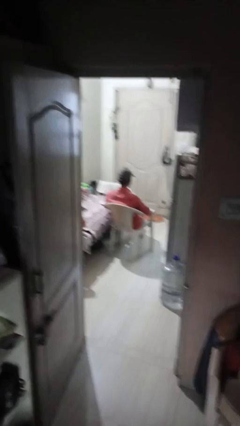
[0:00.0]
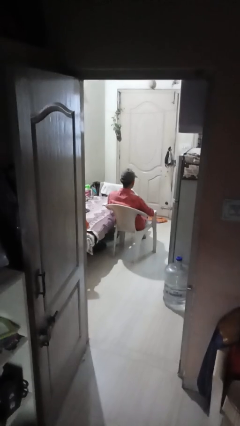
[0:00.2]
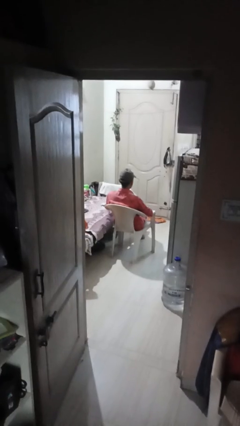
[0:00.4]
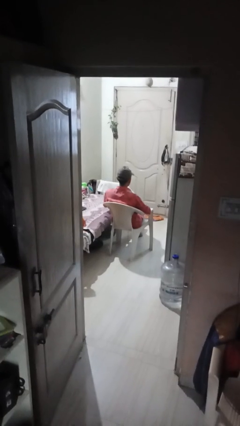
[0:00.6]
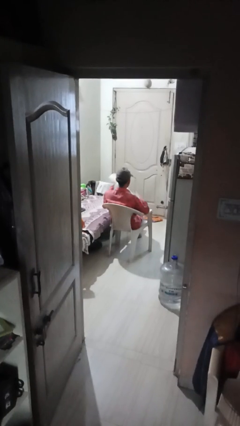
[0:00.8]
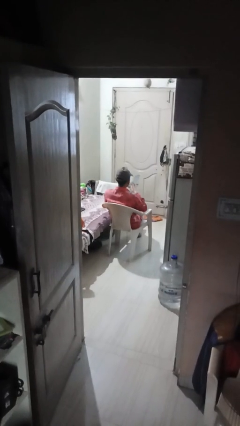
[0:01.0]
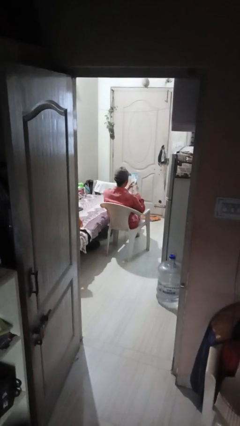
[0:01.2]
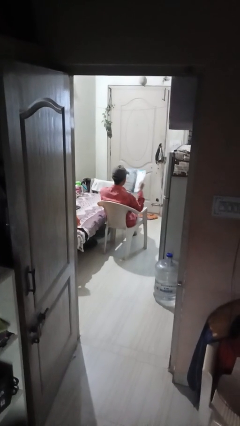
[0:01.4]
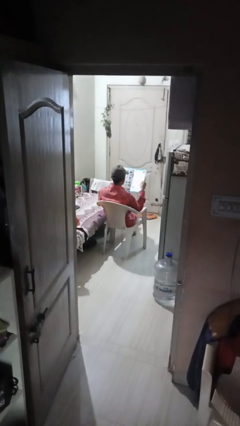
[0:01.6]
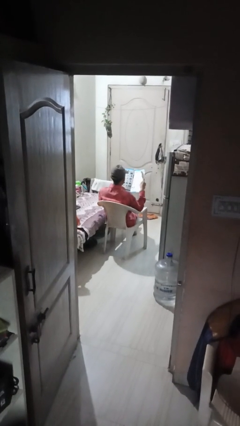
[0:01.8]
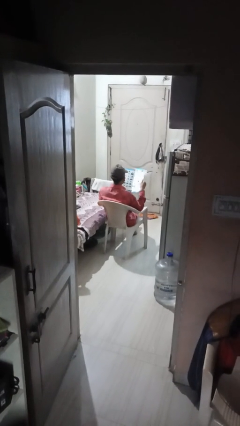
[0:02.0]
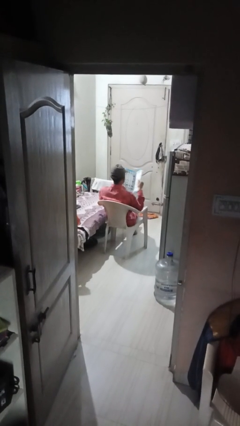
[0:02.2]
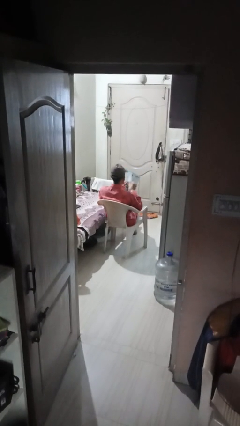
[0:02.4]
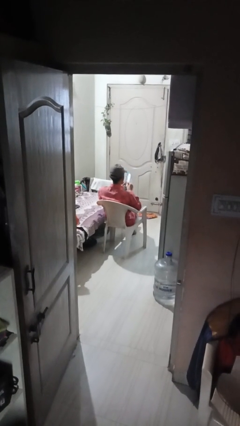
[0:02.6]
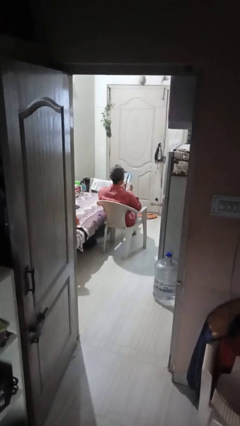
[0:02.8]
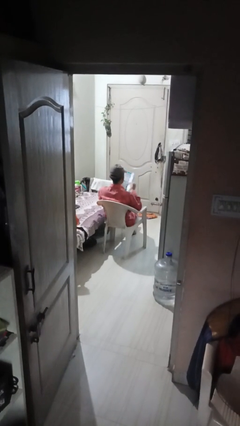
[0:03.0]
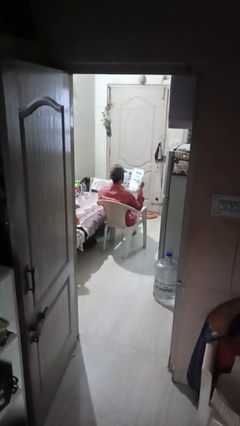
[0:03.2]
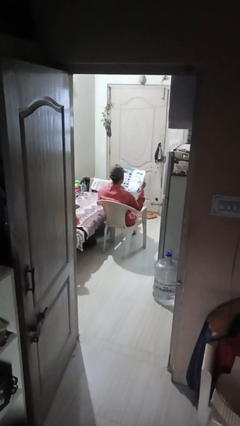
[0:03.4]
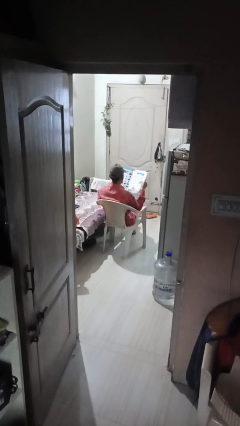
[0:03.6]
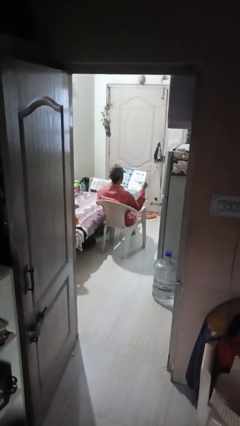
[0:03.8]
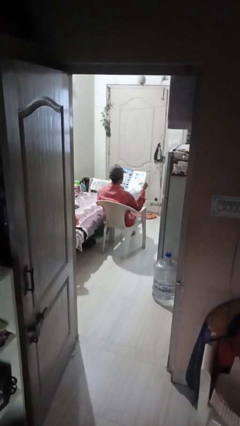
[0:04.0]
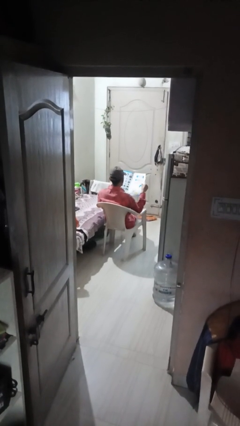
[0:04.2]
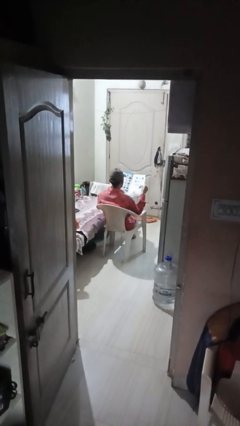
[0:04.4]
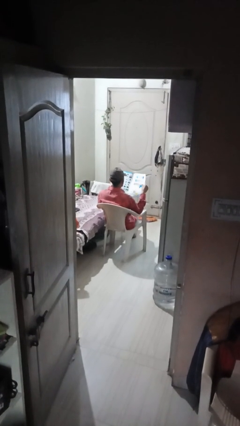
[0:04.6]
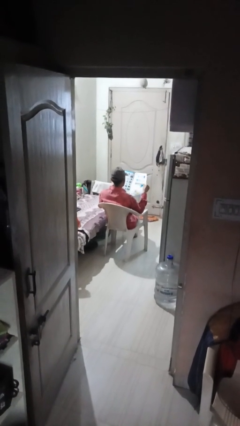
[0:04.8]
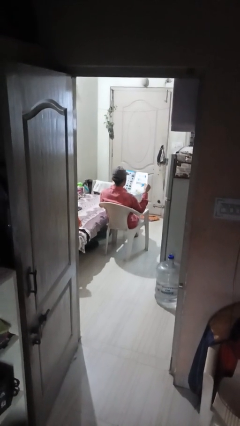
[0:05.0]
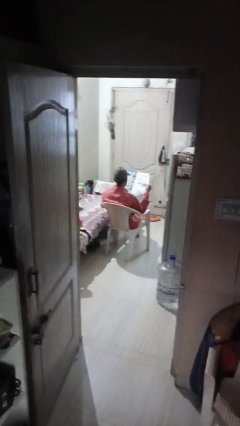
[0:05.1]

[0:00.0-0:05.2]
person reads magazine

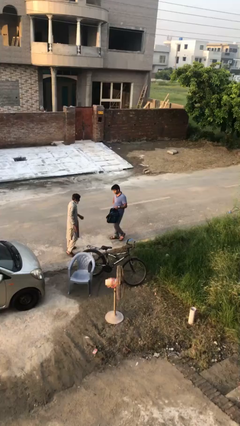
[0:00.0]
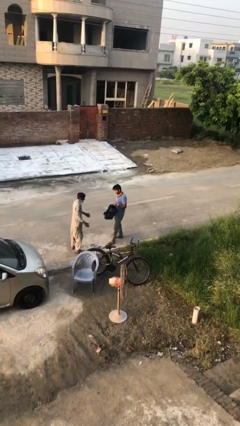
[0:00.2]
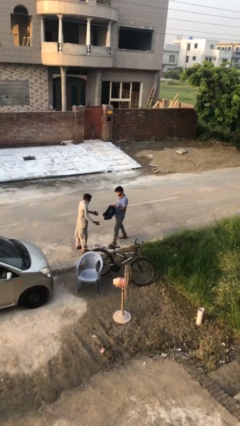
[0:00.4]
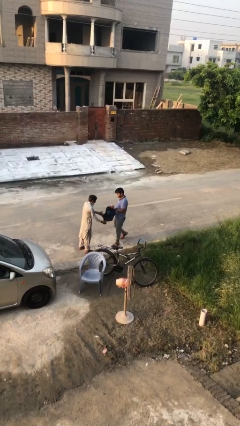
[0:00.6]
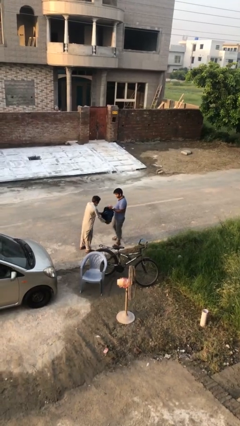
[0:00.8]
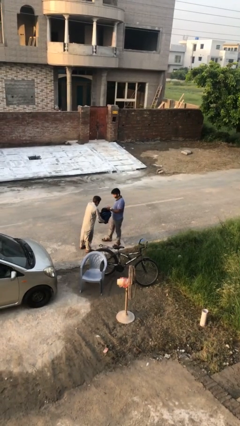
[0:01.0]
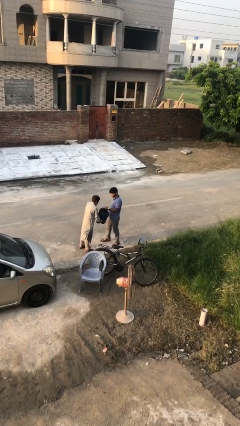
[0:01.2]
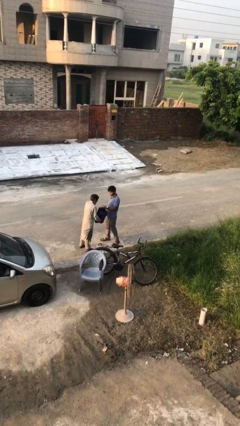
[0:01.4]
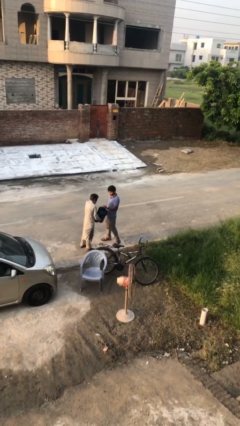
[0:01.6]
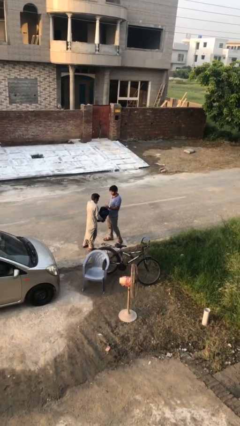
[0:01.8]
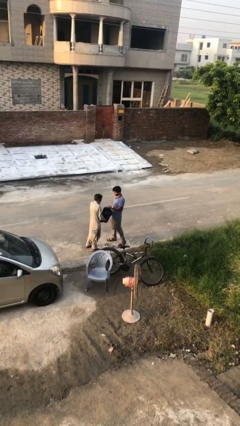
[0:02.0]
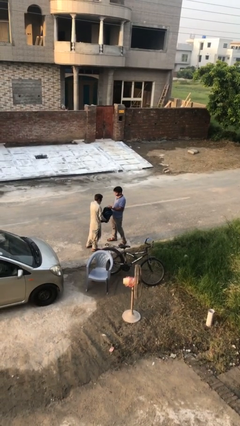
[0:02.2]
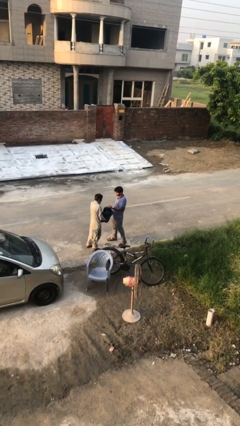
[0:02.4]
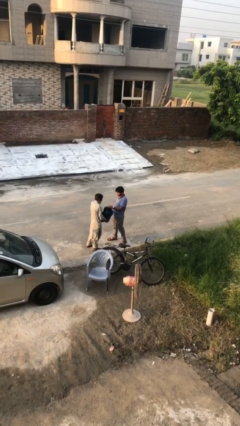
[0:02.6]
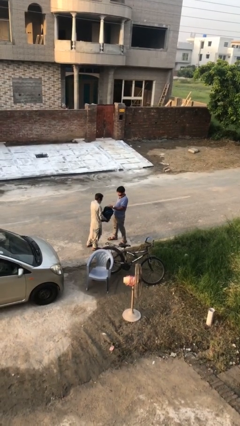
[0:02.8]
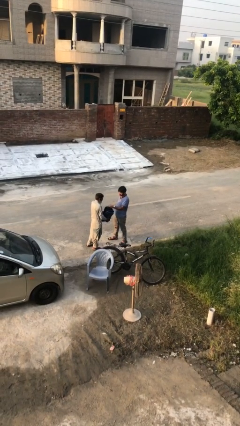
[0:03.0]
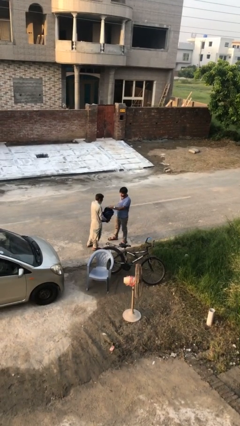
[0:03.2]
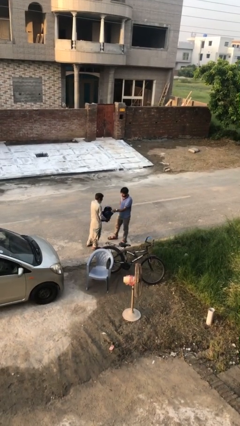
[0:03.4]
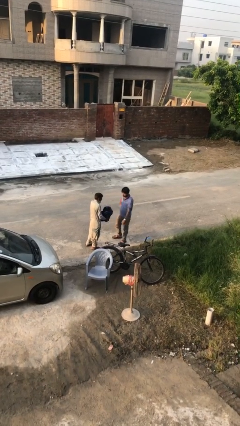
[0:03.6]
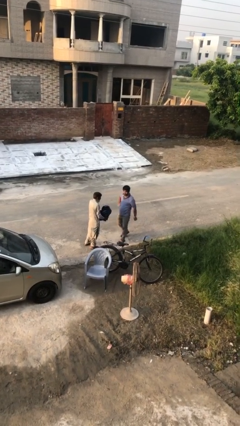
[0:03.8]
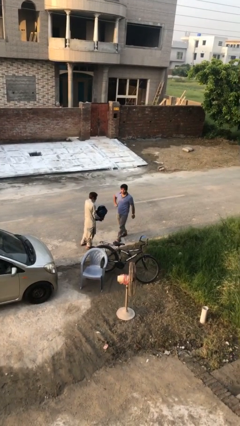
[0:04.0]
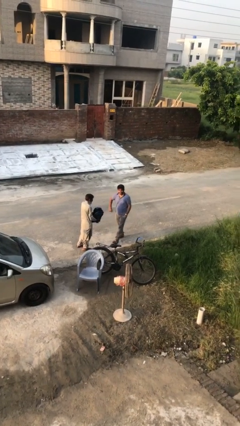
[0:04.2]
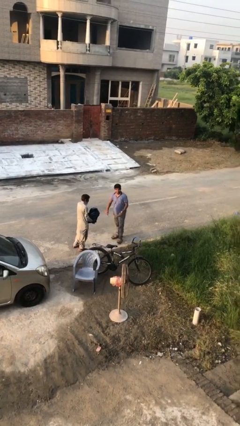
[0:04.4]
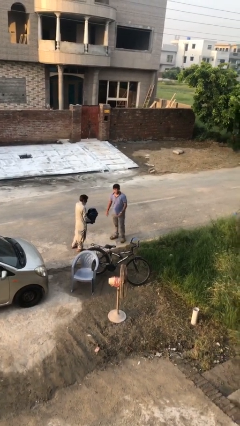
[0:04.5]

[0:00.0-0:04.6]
person transfers object to person

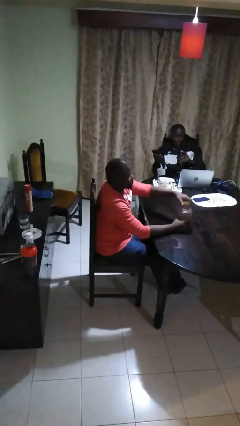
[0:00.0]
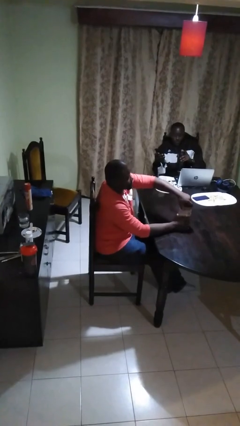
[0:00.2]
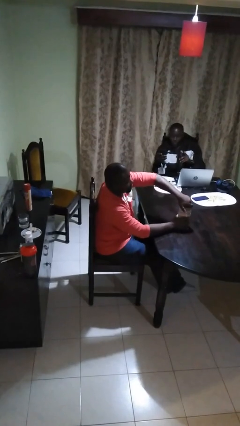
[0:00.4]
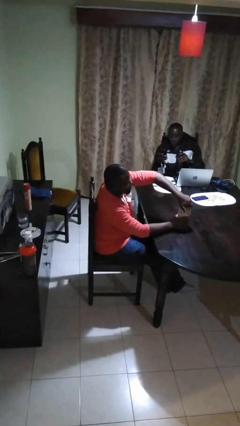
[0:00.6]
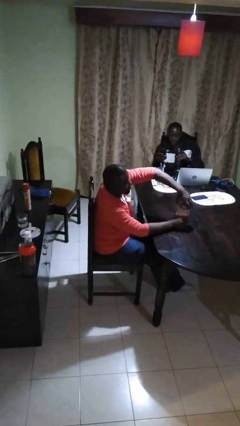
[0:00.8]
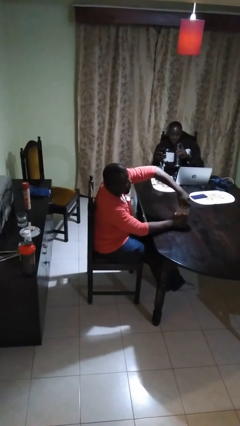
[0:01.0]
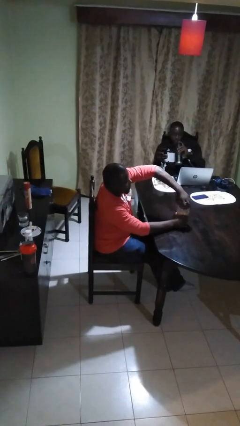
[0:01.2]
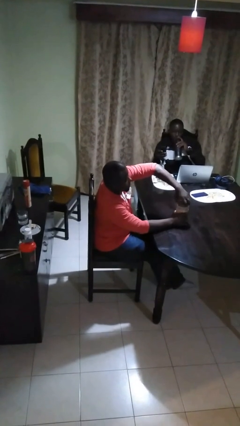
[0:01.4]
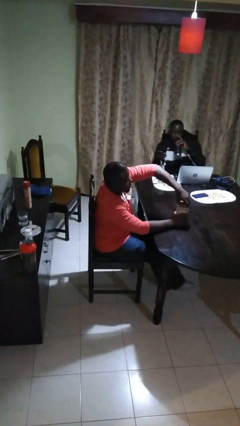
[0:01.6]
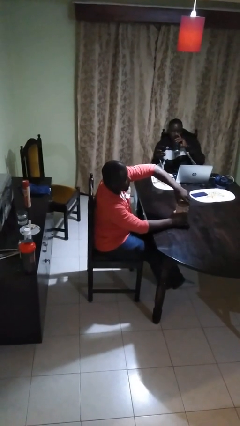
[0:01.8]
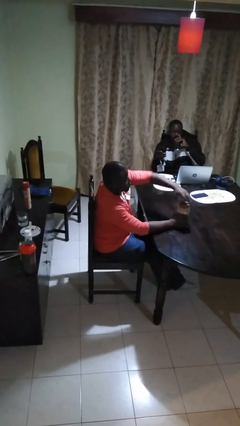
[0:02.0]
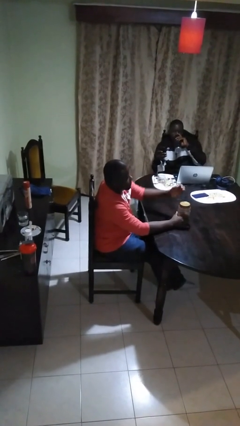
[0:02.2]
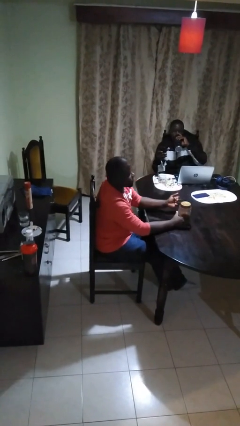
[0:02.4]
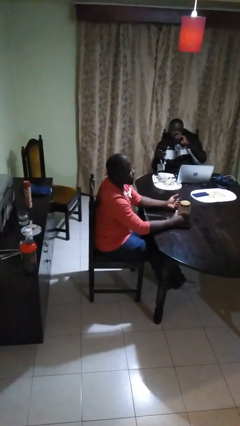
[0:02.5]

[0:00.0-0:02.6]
person closes jar

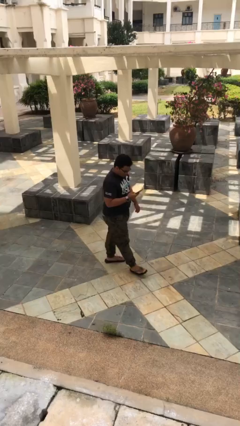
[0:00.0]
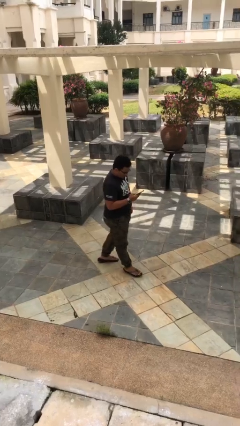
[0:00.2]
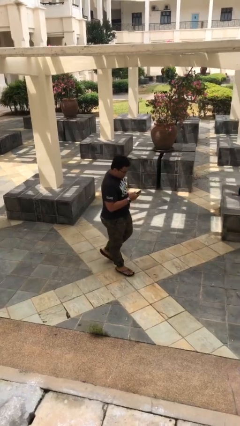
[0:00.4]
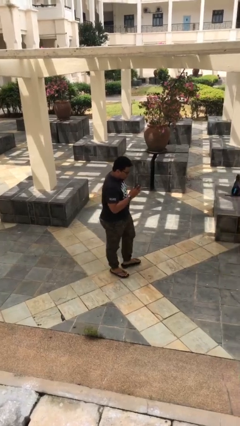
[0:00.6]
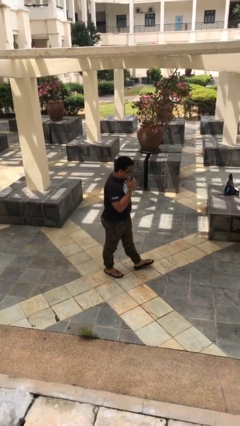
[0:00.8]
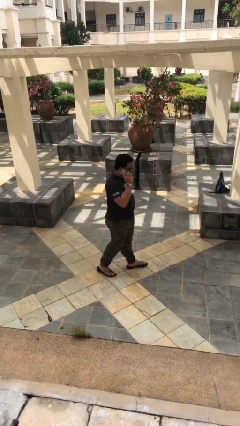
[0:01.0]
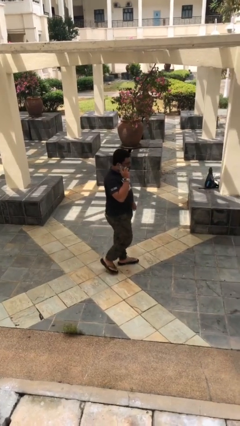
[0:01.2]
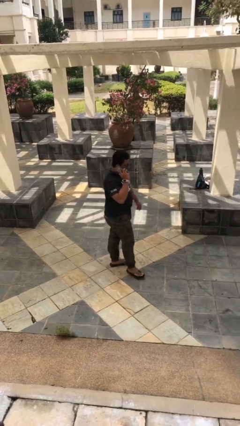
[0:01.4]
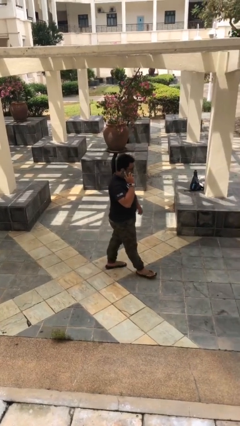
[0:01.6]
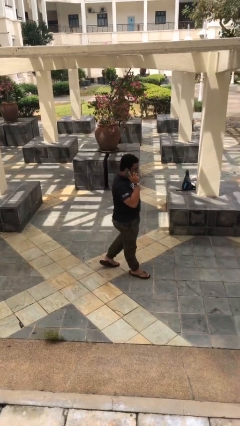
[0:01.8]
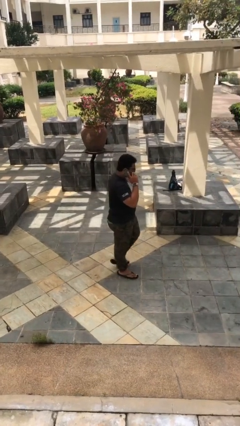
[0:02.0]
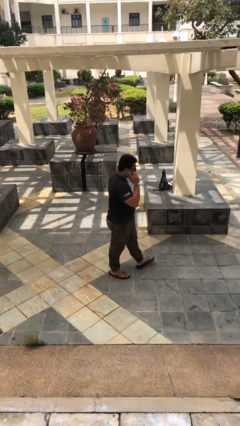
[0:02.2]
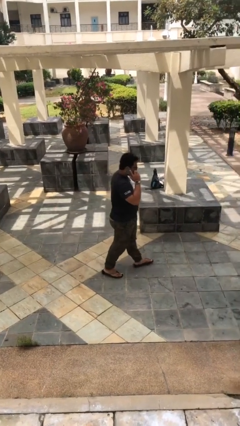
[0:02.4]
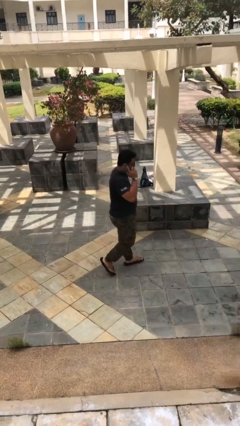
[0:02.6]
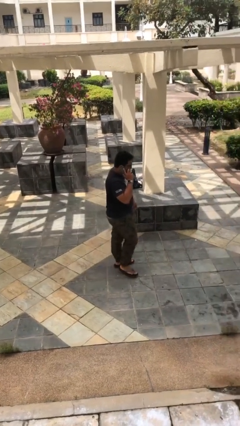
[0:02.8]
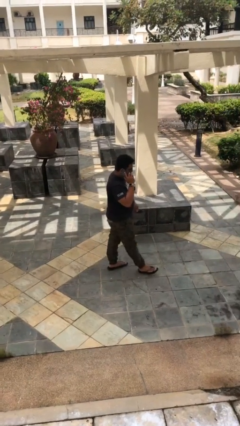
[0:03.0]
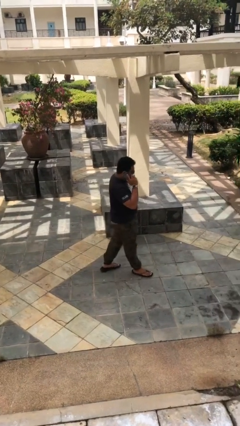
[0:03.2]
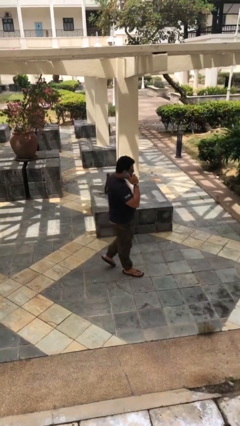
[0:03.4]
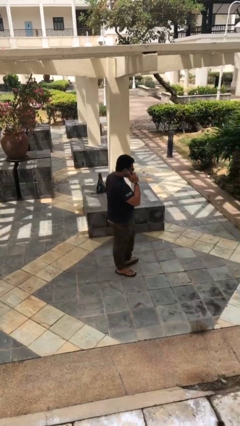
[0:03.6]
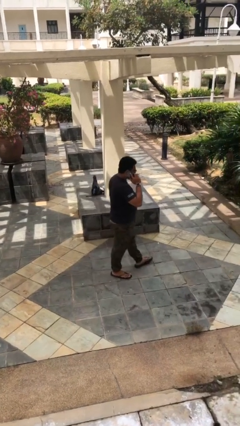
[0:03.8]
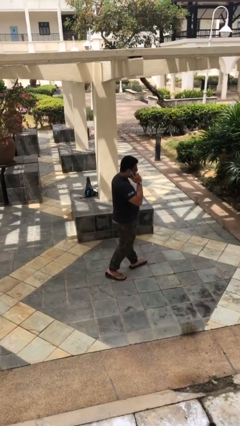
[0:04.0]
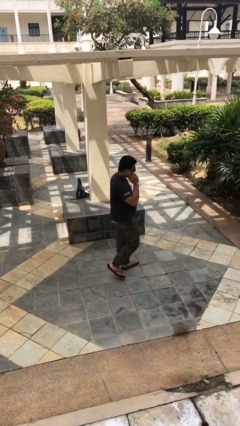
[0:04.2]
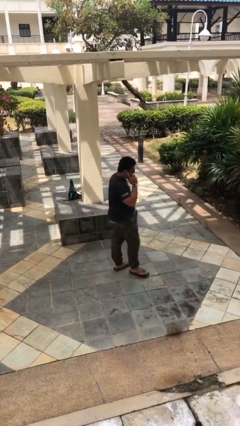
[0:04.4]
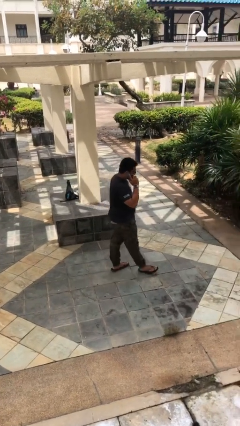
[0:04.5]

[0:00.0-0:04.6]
person talks on phone

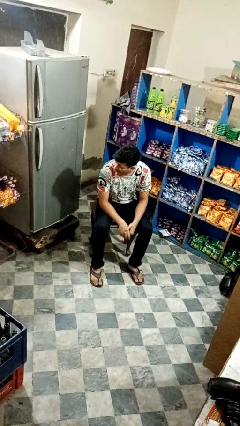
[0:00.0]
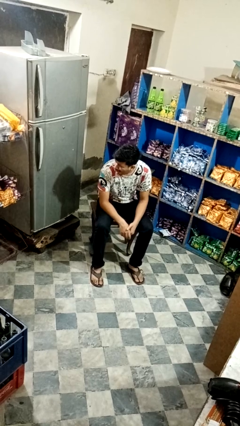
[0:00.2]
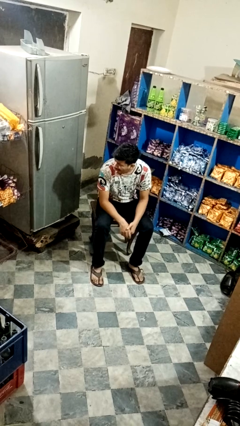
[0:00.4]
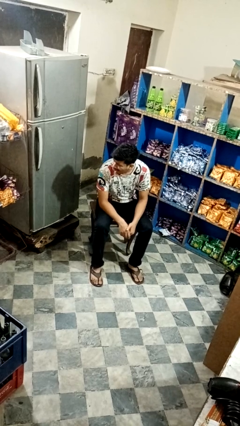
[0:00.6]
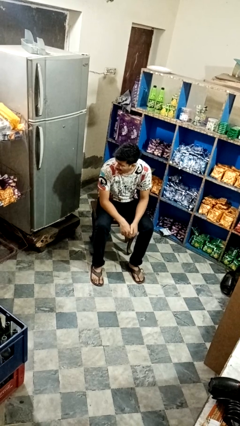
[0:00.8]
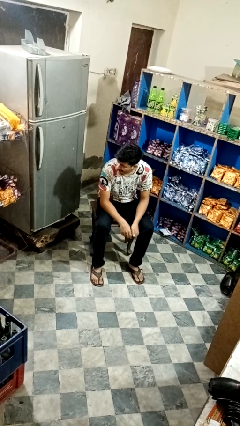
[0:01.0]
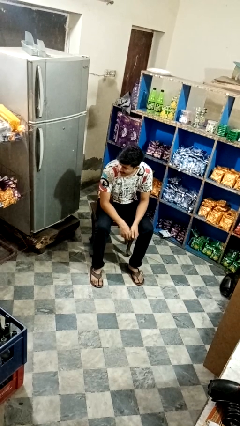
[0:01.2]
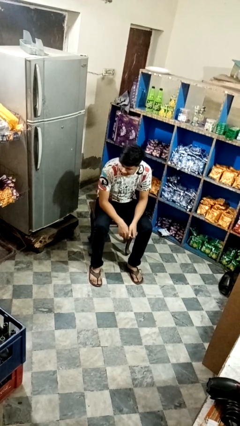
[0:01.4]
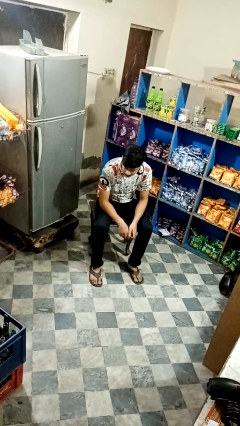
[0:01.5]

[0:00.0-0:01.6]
person sticks out tongue
